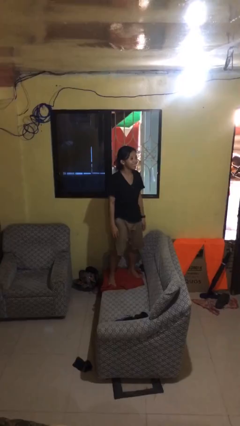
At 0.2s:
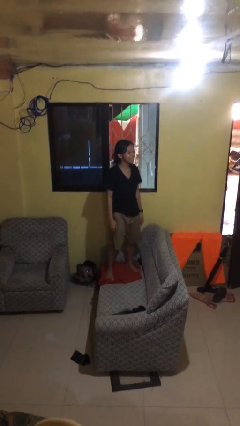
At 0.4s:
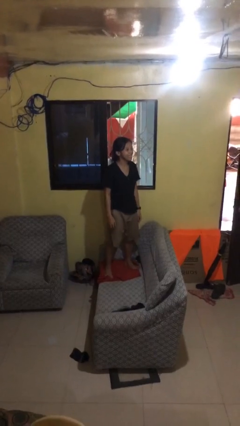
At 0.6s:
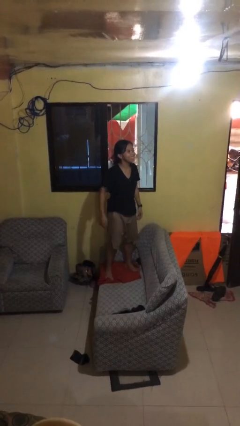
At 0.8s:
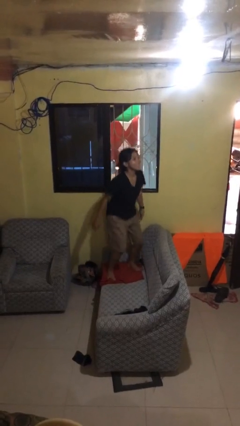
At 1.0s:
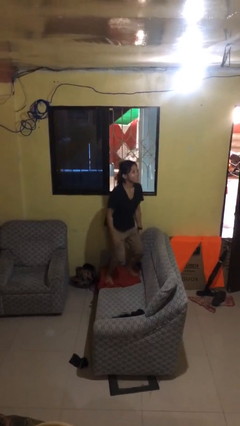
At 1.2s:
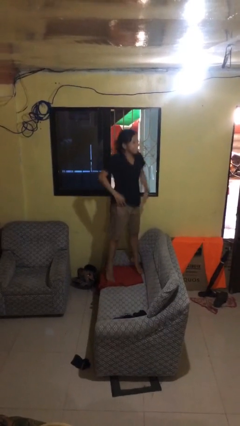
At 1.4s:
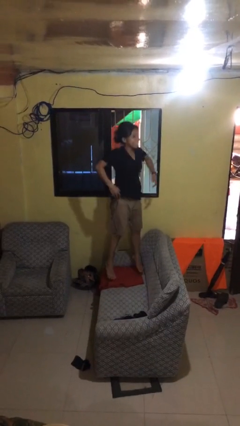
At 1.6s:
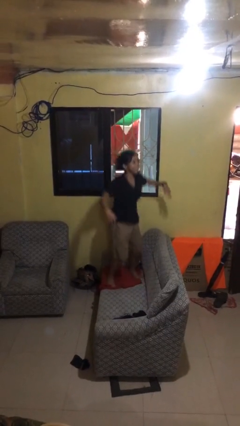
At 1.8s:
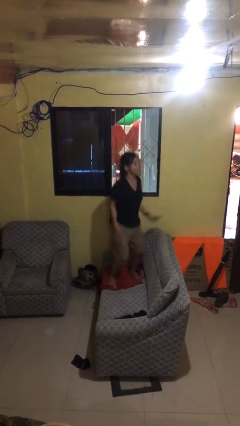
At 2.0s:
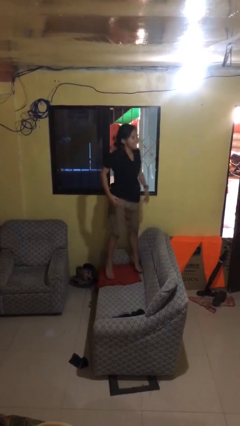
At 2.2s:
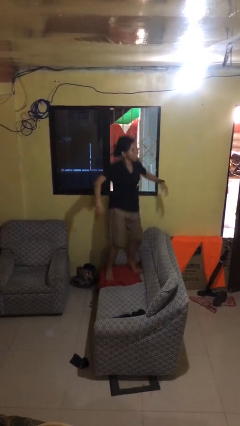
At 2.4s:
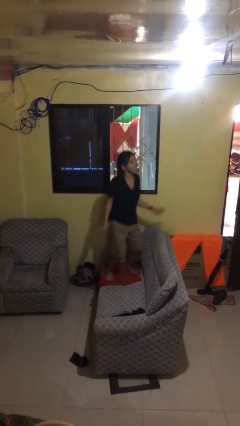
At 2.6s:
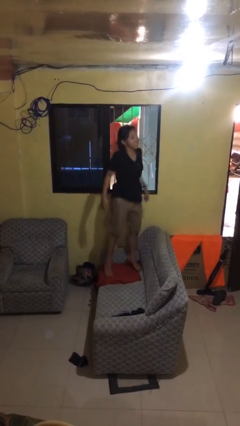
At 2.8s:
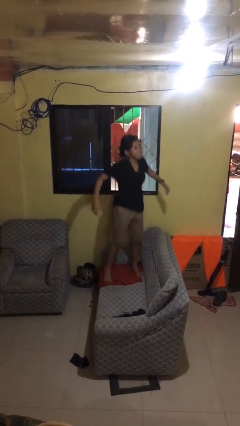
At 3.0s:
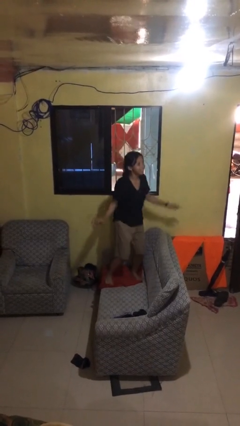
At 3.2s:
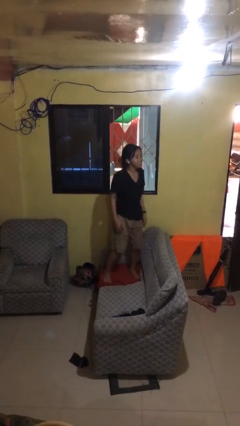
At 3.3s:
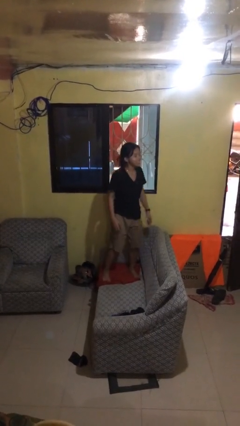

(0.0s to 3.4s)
person jumps on couch

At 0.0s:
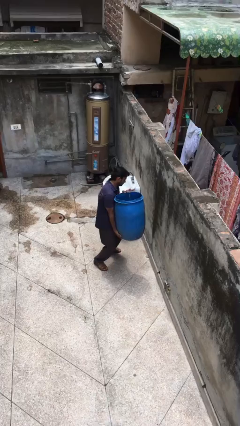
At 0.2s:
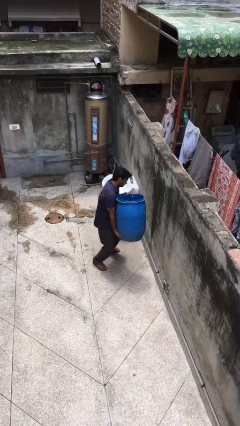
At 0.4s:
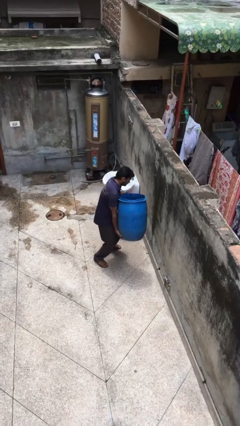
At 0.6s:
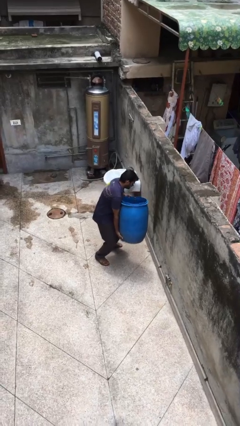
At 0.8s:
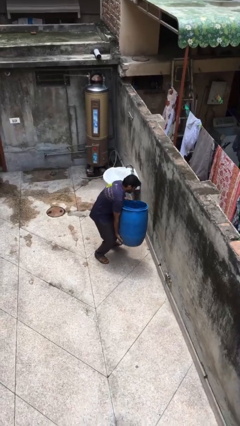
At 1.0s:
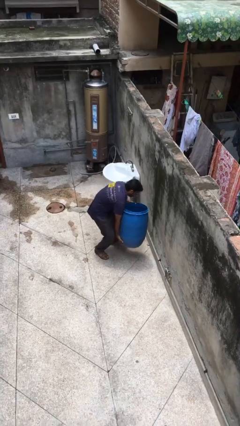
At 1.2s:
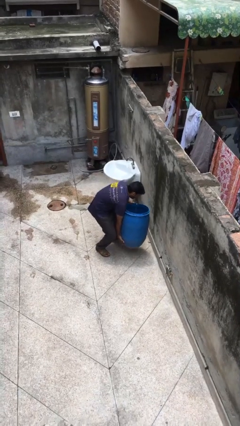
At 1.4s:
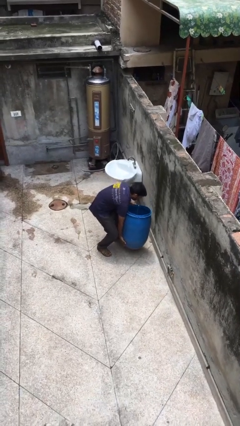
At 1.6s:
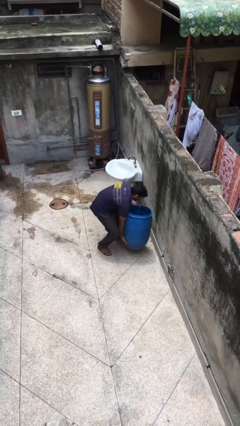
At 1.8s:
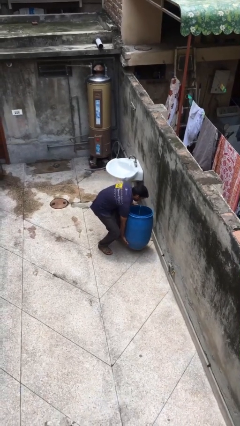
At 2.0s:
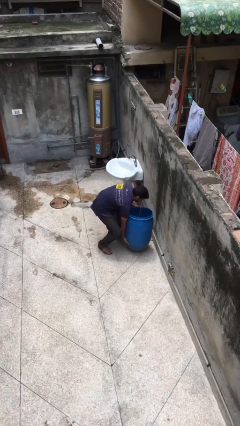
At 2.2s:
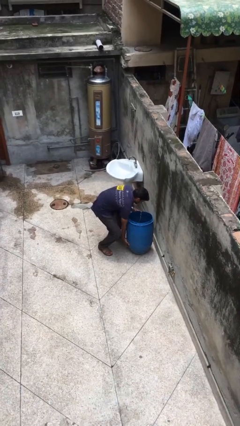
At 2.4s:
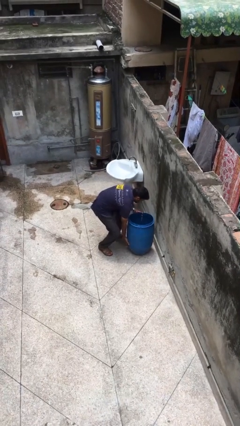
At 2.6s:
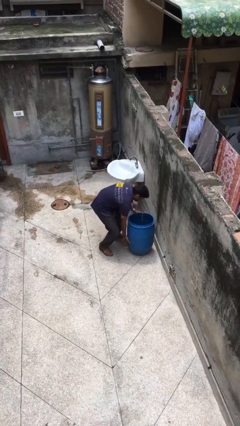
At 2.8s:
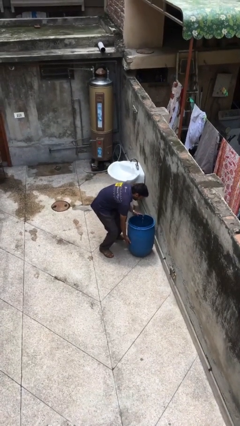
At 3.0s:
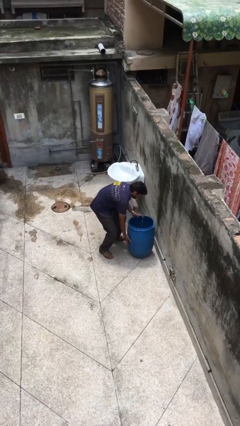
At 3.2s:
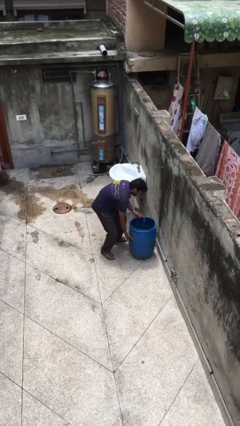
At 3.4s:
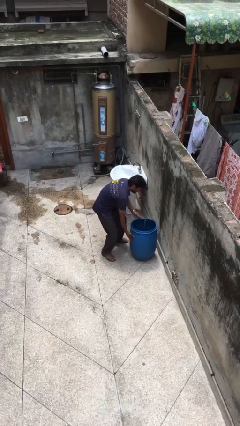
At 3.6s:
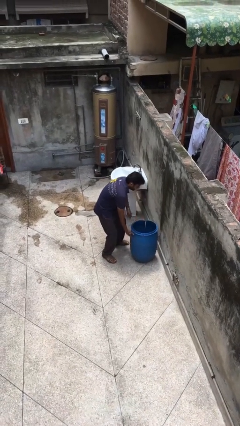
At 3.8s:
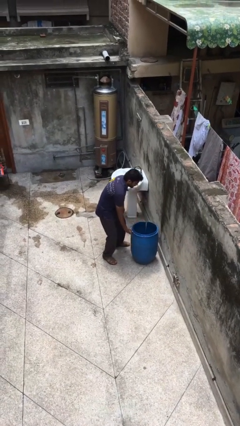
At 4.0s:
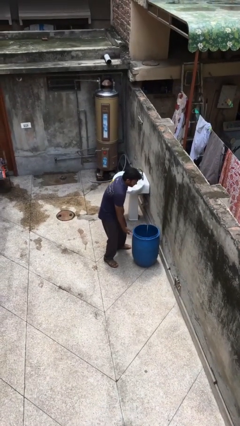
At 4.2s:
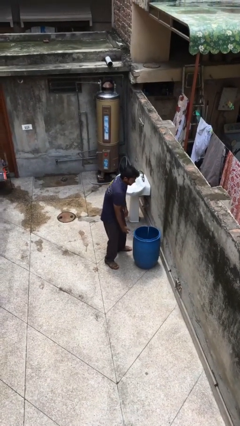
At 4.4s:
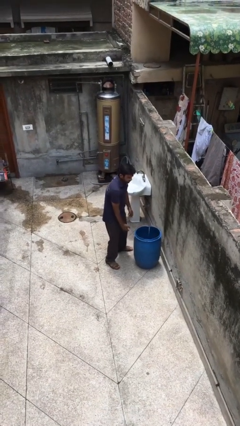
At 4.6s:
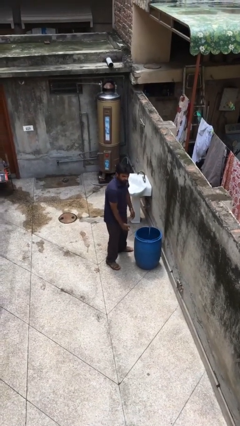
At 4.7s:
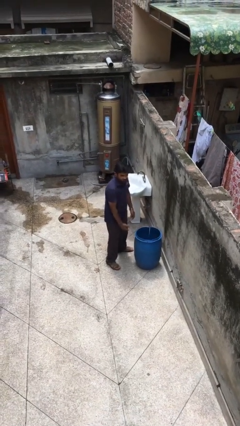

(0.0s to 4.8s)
person puts down object on floor

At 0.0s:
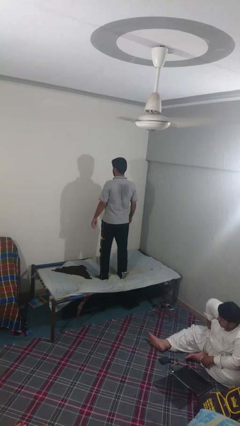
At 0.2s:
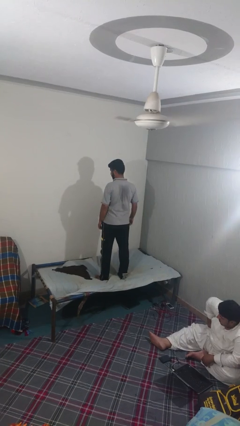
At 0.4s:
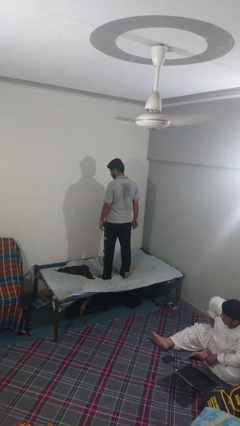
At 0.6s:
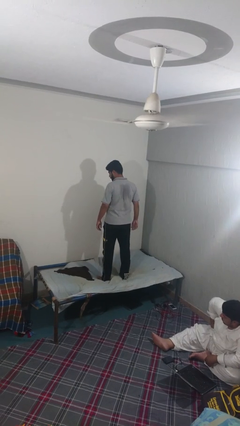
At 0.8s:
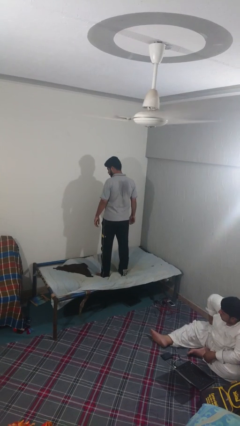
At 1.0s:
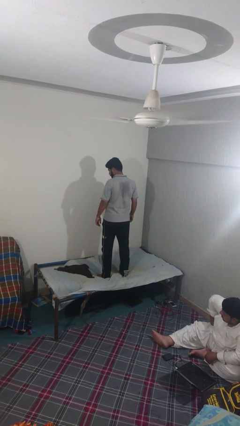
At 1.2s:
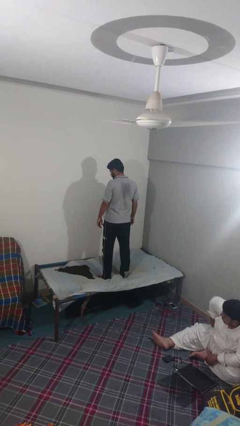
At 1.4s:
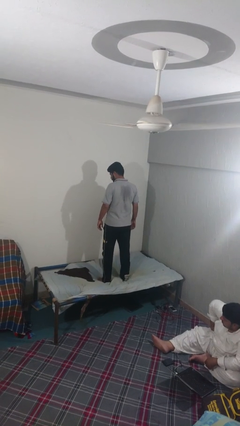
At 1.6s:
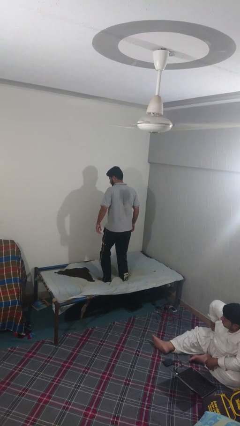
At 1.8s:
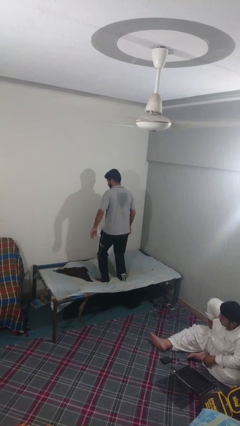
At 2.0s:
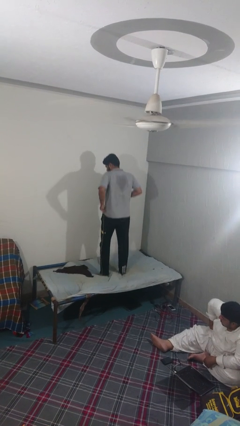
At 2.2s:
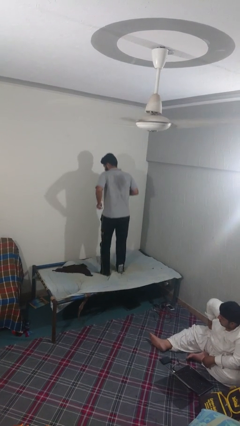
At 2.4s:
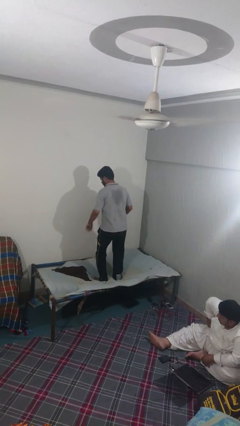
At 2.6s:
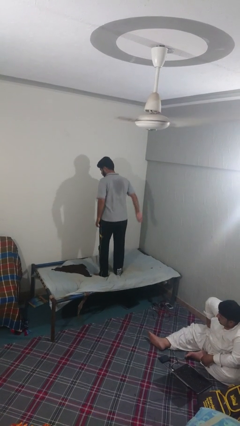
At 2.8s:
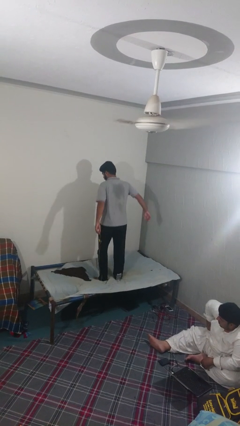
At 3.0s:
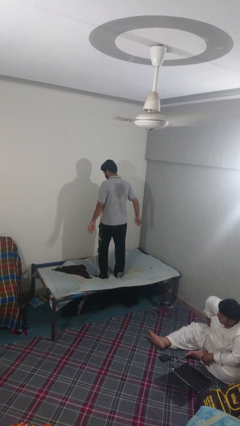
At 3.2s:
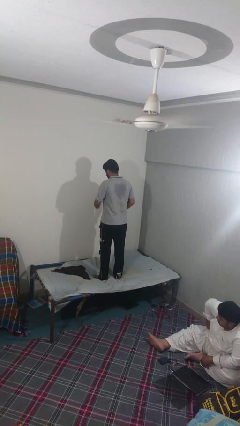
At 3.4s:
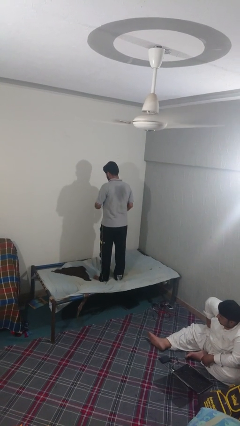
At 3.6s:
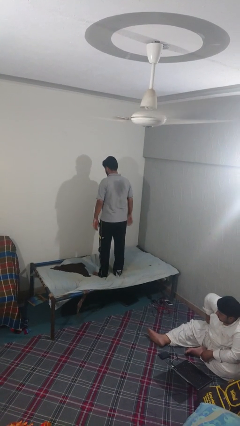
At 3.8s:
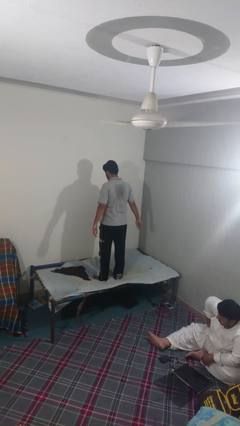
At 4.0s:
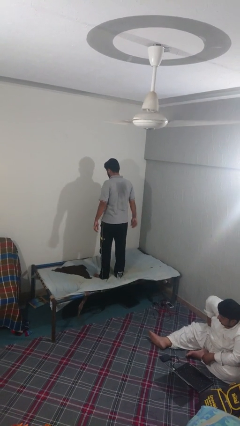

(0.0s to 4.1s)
person jumps on bed

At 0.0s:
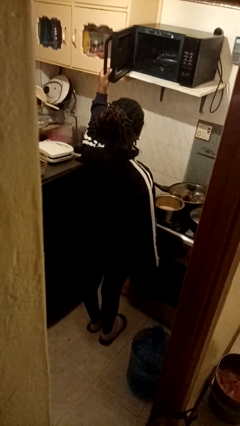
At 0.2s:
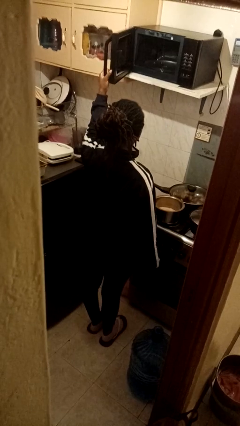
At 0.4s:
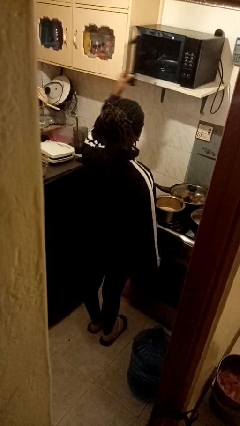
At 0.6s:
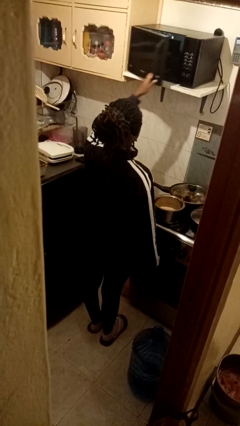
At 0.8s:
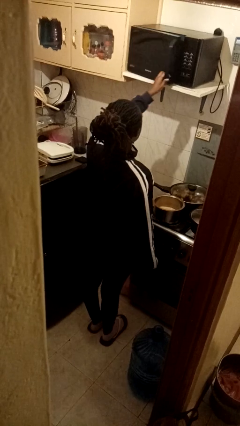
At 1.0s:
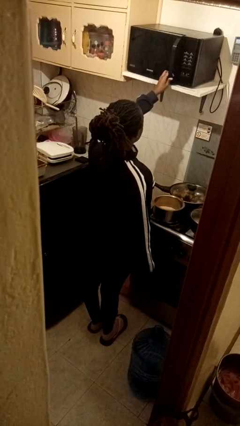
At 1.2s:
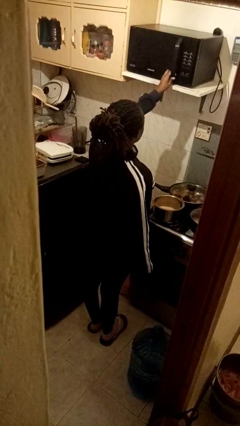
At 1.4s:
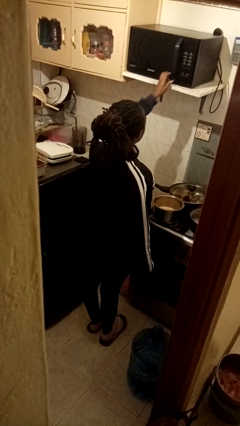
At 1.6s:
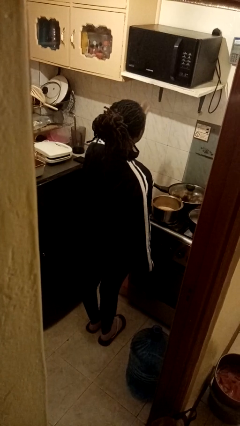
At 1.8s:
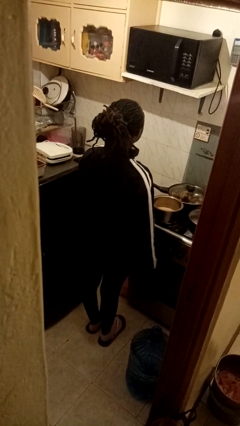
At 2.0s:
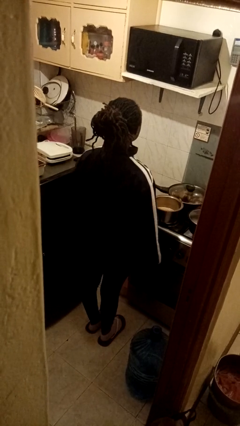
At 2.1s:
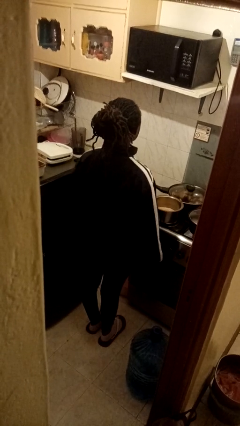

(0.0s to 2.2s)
person closes microwave

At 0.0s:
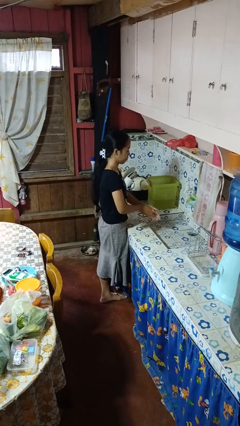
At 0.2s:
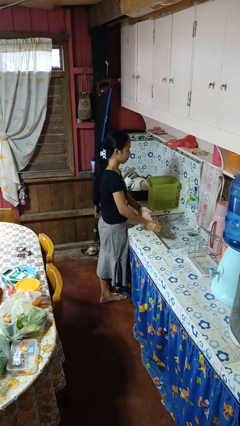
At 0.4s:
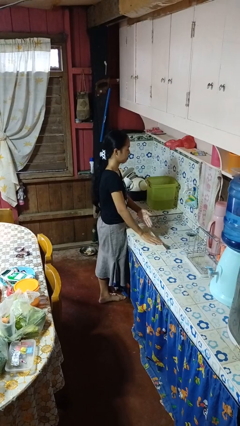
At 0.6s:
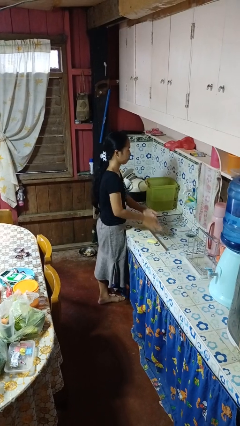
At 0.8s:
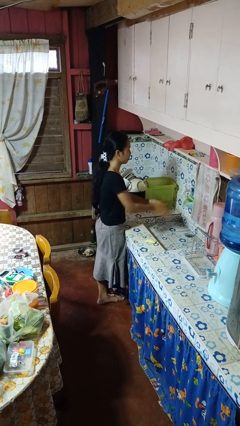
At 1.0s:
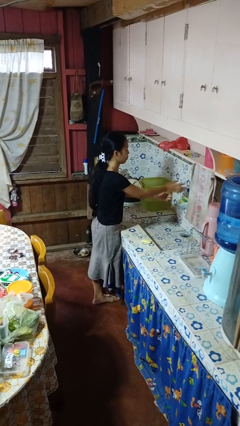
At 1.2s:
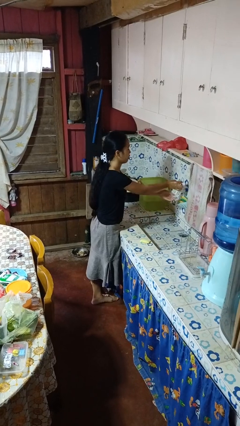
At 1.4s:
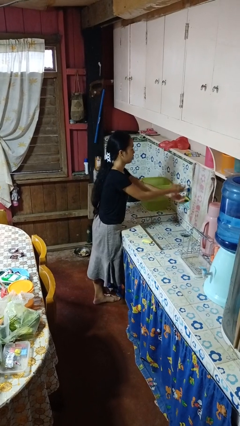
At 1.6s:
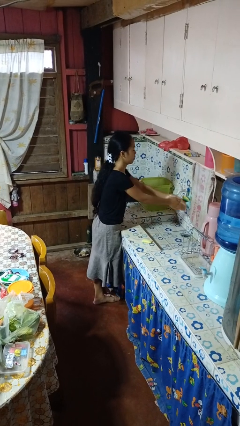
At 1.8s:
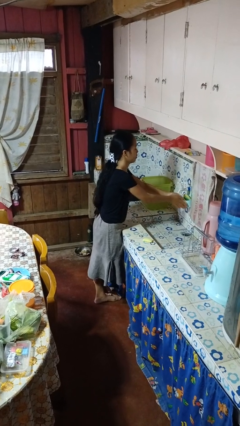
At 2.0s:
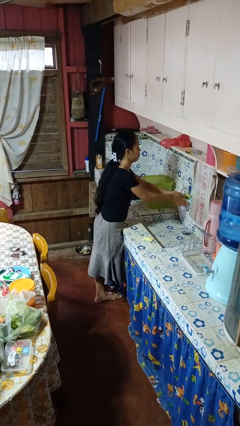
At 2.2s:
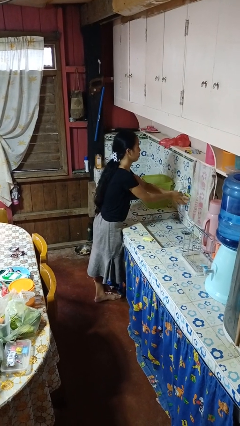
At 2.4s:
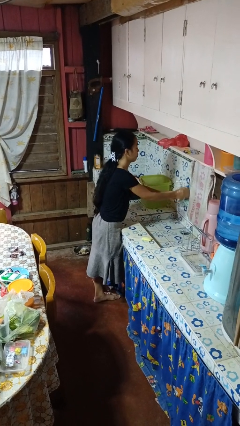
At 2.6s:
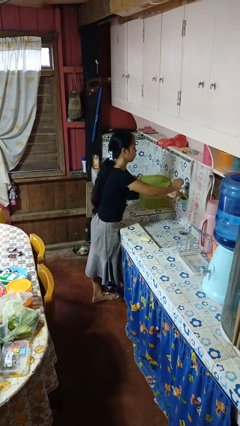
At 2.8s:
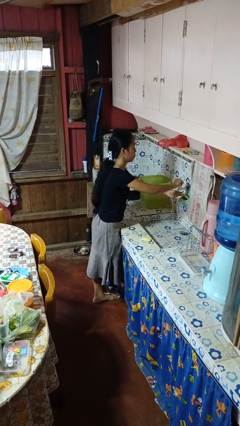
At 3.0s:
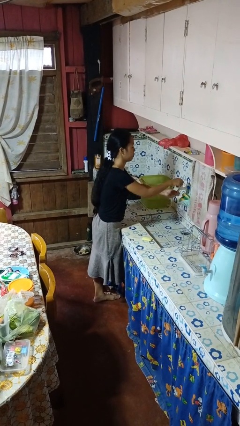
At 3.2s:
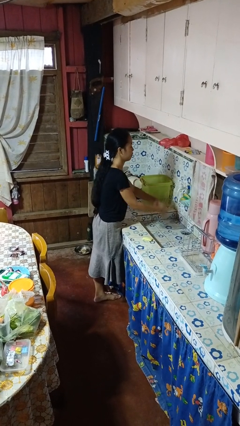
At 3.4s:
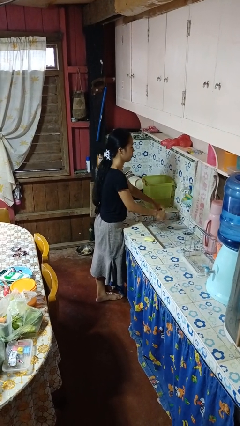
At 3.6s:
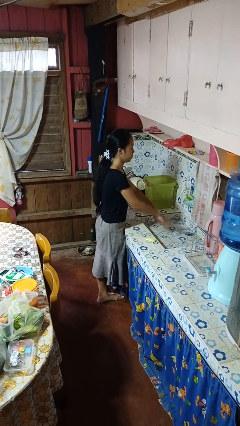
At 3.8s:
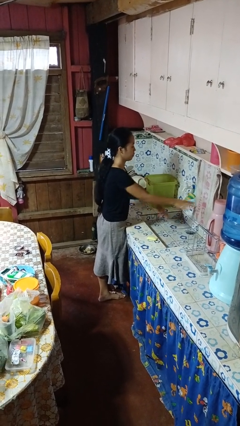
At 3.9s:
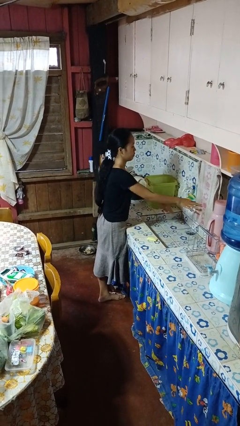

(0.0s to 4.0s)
person washes hands
